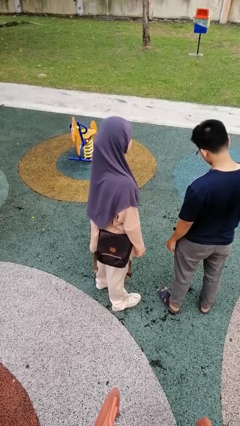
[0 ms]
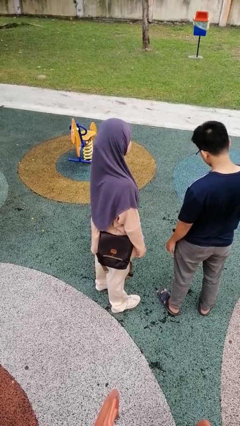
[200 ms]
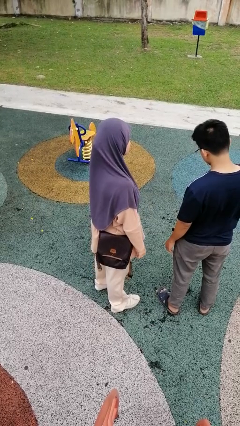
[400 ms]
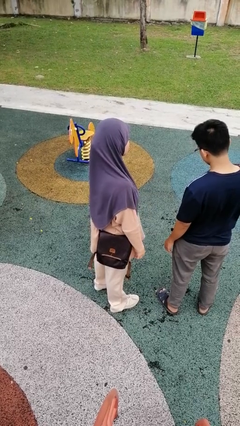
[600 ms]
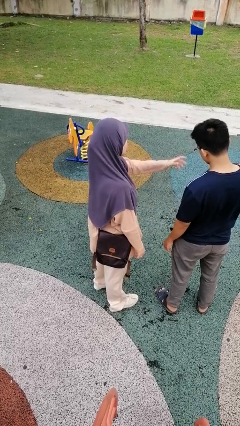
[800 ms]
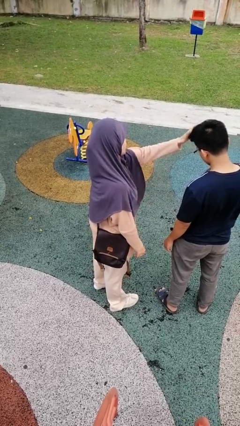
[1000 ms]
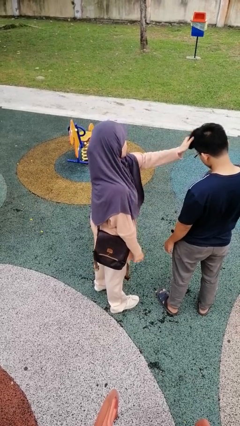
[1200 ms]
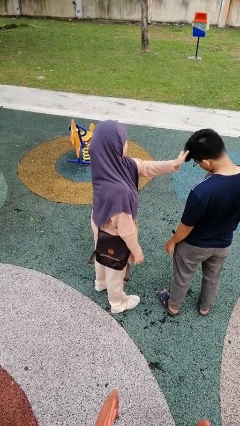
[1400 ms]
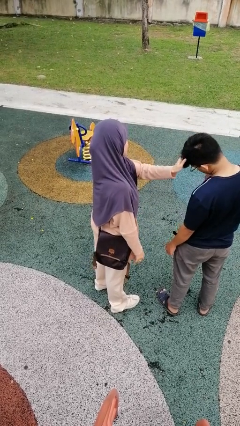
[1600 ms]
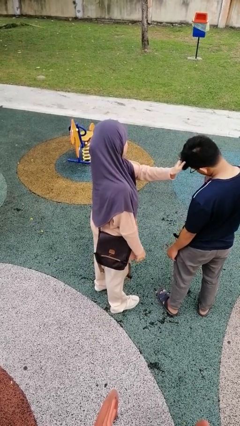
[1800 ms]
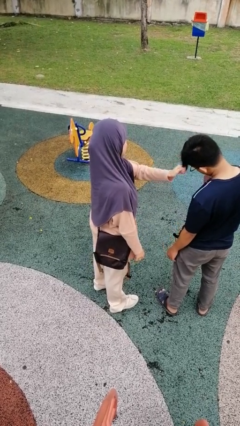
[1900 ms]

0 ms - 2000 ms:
person grabs person by hair

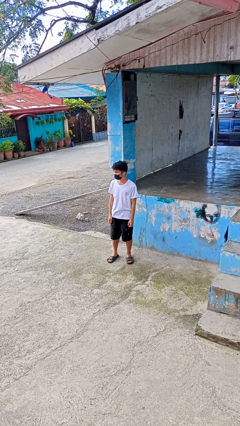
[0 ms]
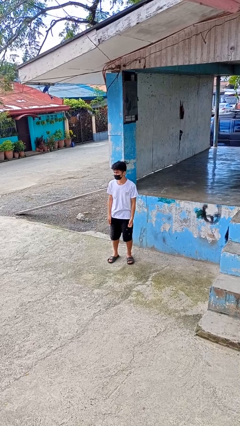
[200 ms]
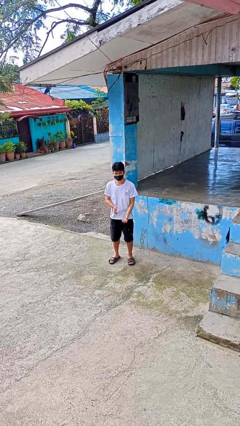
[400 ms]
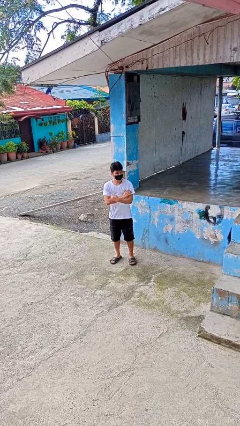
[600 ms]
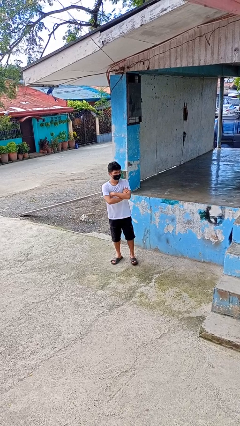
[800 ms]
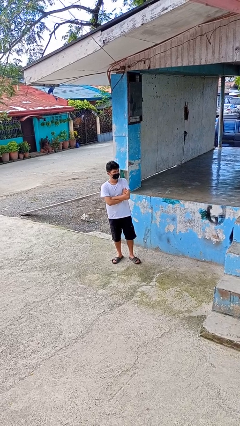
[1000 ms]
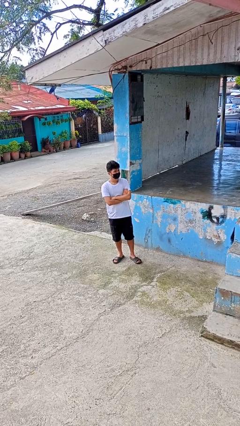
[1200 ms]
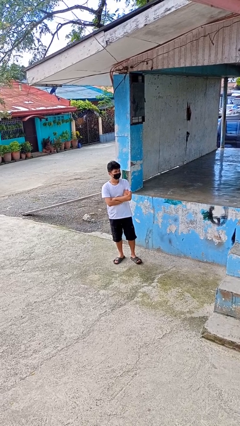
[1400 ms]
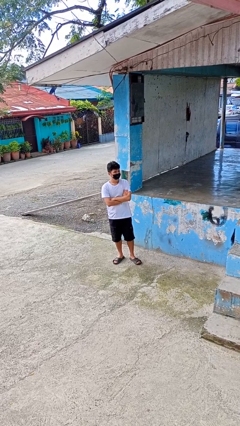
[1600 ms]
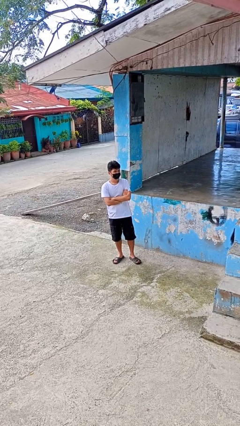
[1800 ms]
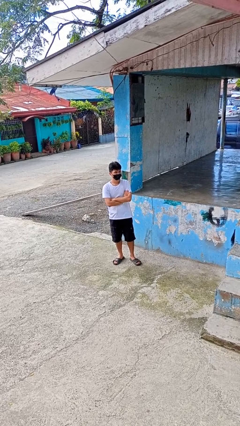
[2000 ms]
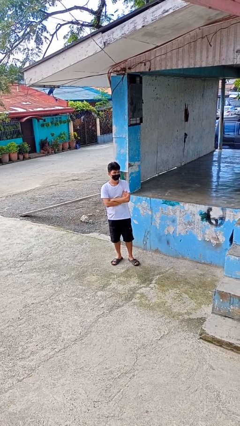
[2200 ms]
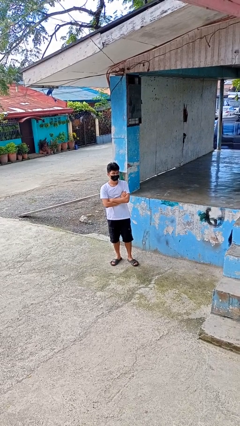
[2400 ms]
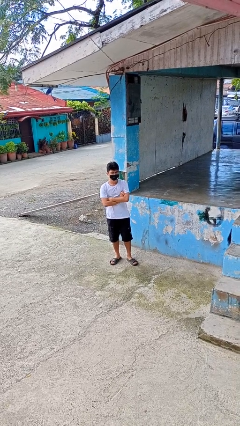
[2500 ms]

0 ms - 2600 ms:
person crosses arms

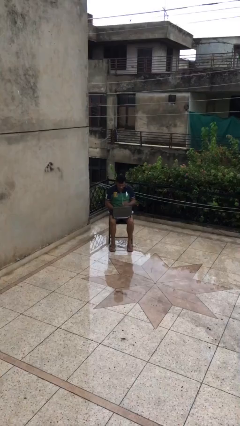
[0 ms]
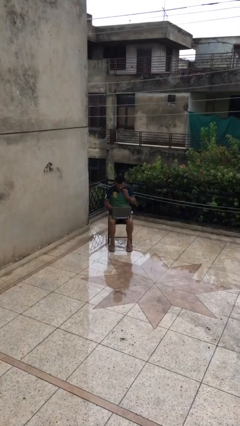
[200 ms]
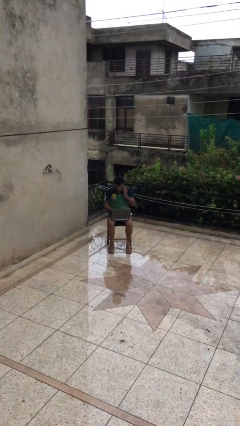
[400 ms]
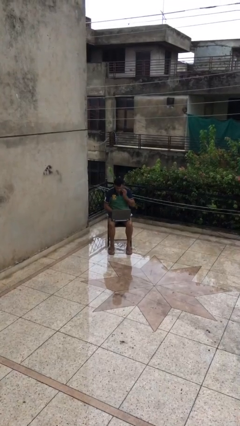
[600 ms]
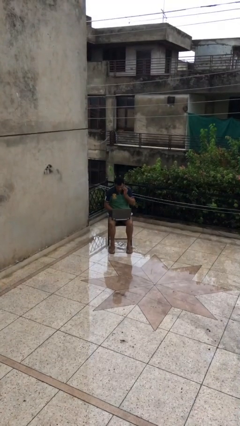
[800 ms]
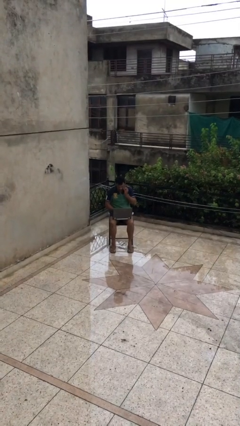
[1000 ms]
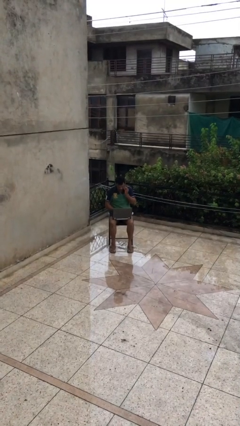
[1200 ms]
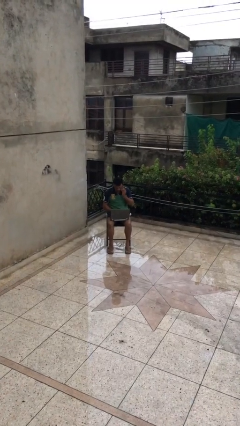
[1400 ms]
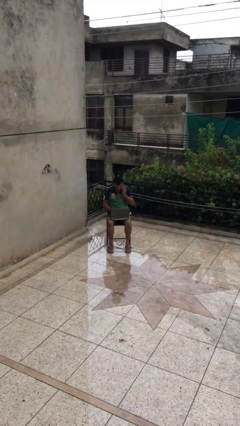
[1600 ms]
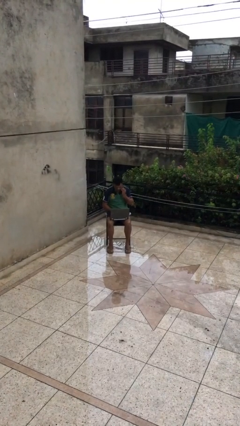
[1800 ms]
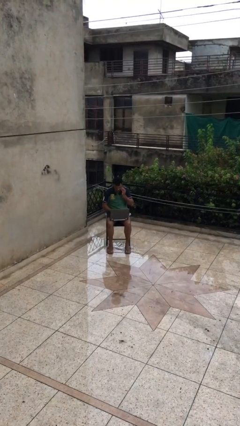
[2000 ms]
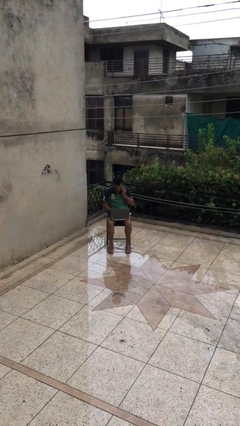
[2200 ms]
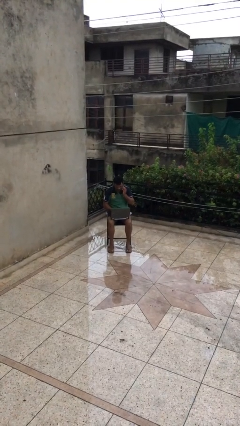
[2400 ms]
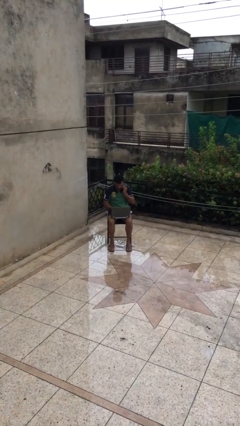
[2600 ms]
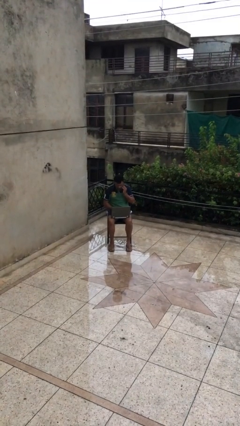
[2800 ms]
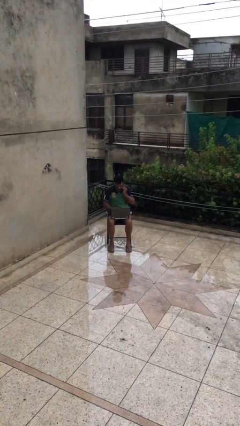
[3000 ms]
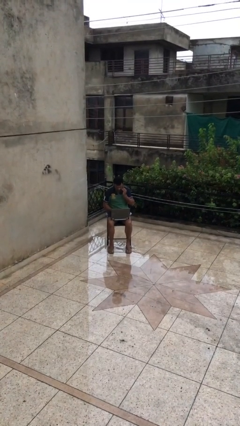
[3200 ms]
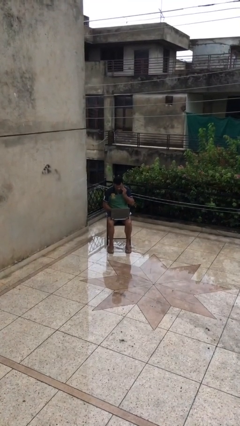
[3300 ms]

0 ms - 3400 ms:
person interacts with laptop

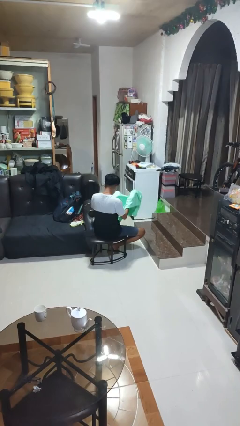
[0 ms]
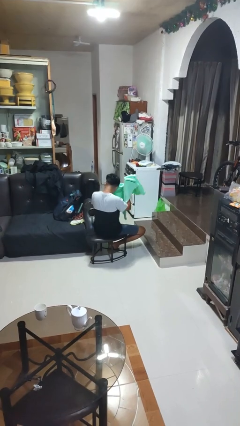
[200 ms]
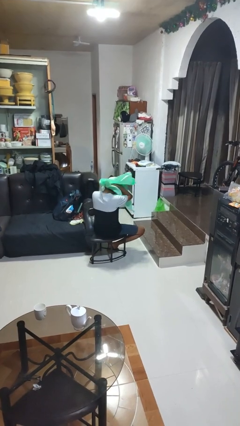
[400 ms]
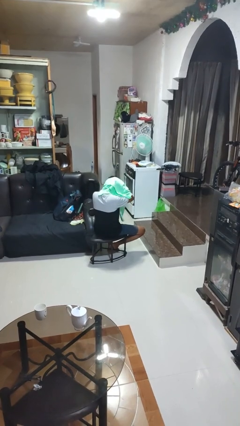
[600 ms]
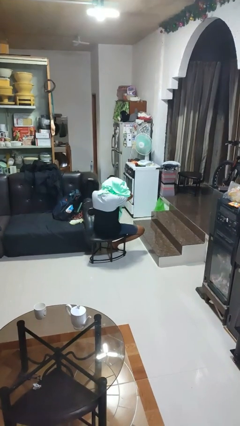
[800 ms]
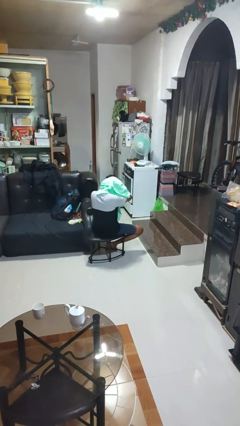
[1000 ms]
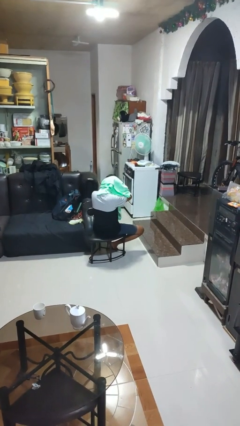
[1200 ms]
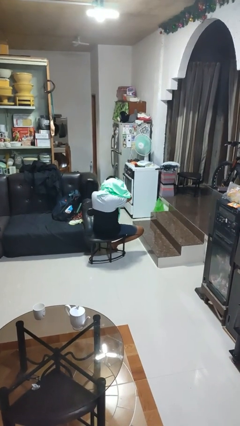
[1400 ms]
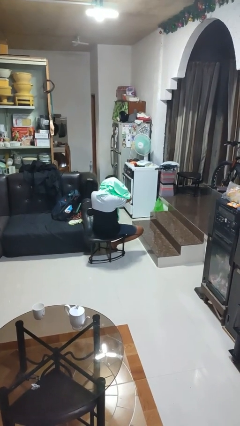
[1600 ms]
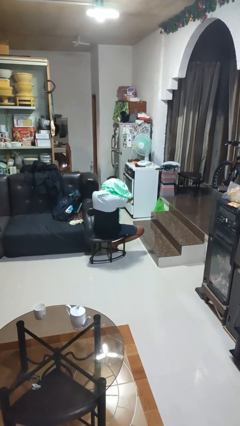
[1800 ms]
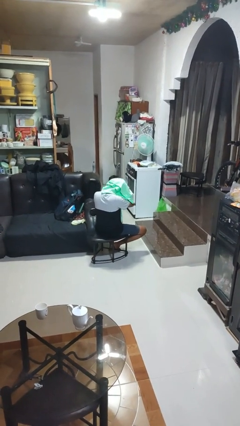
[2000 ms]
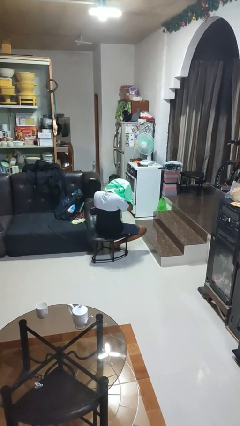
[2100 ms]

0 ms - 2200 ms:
person dries hair with towel

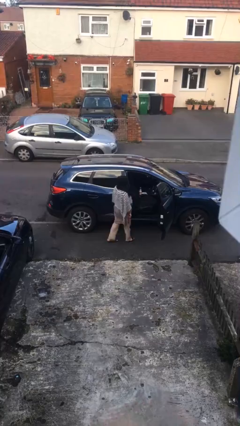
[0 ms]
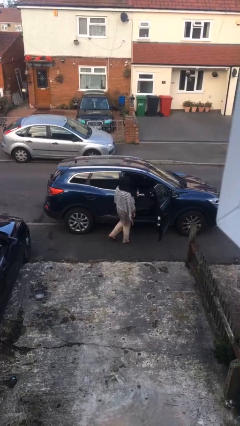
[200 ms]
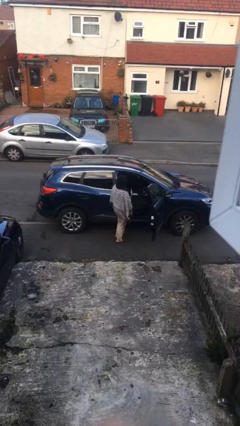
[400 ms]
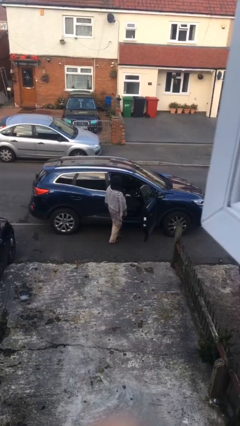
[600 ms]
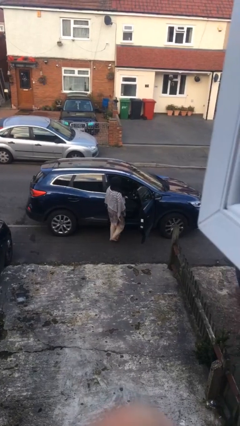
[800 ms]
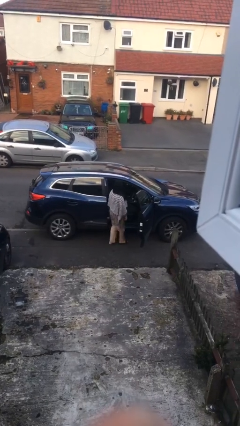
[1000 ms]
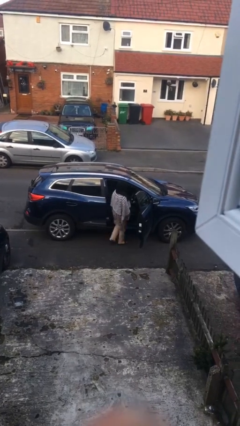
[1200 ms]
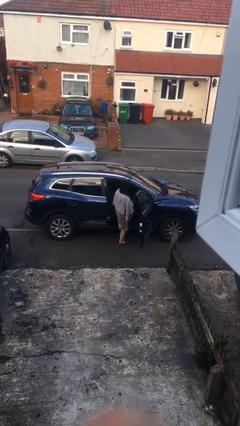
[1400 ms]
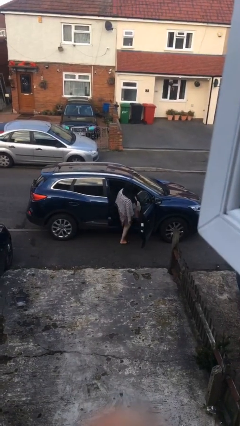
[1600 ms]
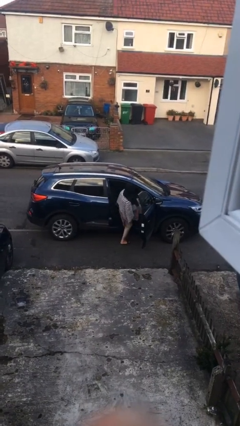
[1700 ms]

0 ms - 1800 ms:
person enters car

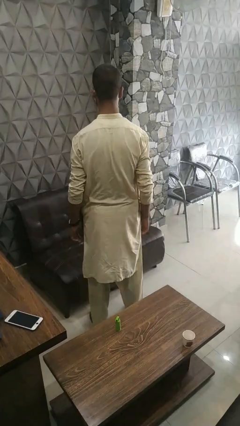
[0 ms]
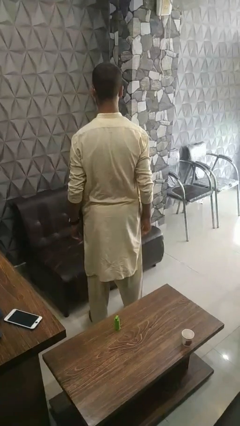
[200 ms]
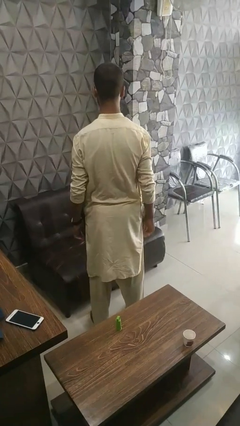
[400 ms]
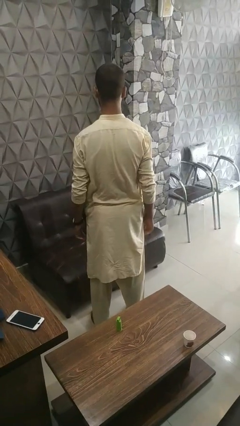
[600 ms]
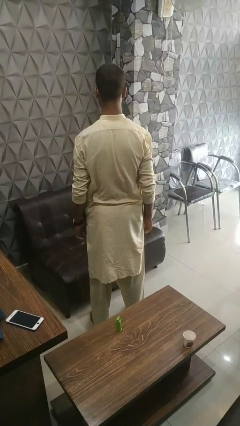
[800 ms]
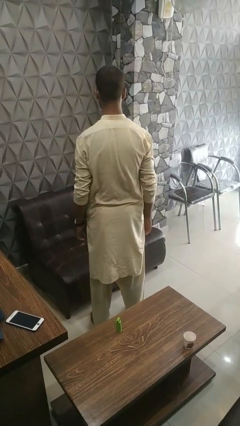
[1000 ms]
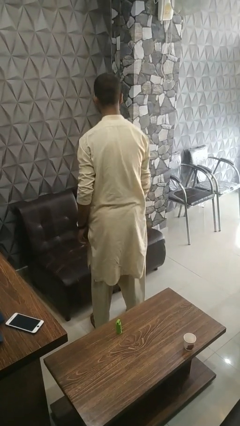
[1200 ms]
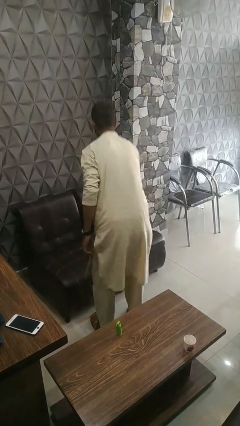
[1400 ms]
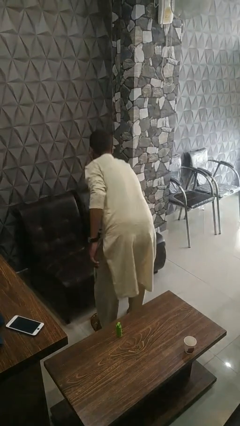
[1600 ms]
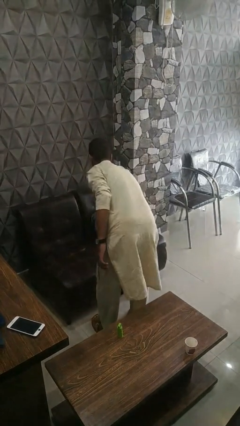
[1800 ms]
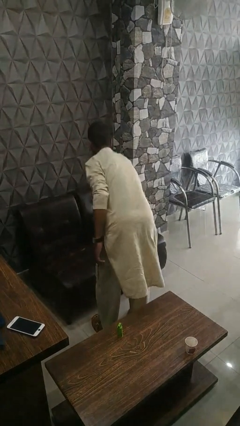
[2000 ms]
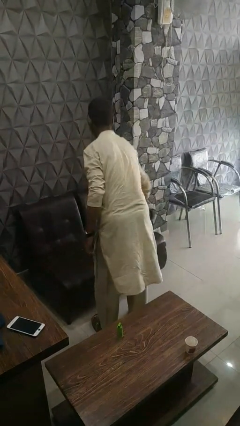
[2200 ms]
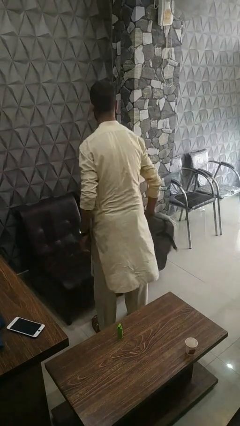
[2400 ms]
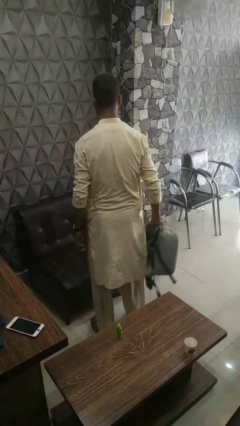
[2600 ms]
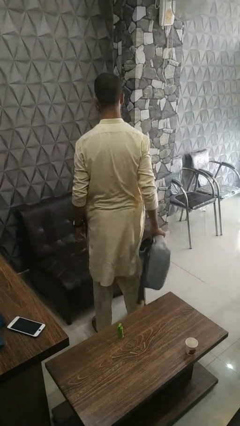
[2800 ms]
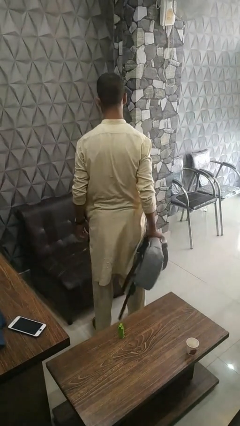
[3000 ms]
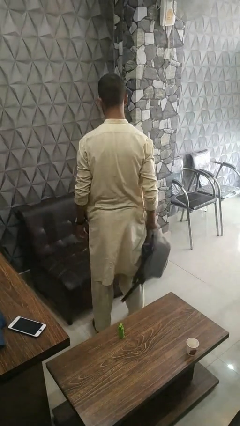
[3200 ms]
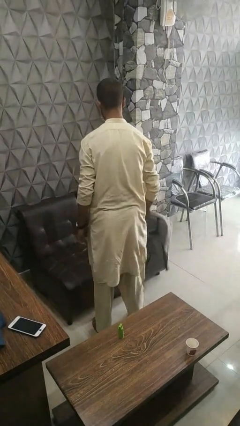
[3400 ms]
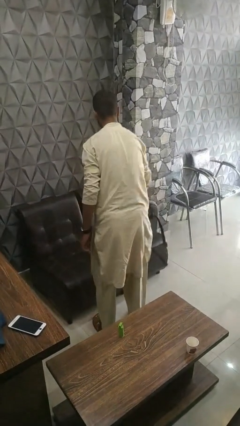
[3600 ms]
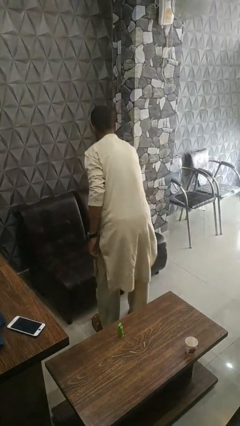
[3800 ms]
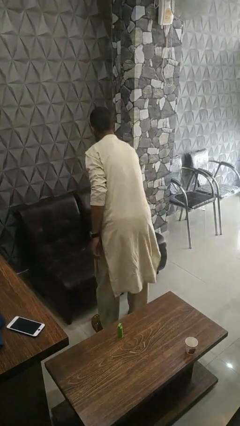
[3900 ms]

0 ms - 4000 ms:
person searches in couch

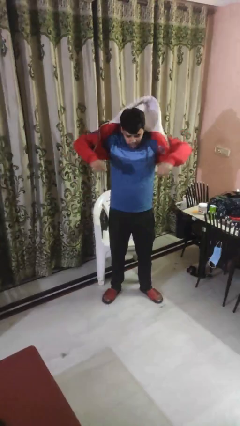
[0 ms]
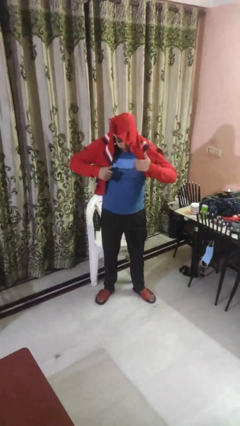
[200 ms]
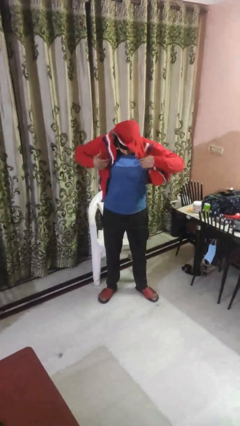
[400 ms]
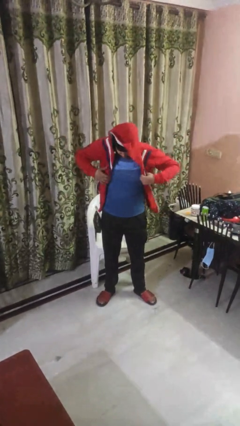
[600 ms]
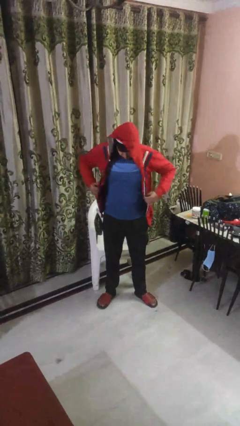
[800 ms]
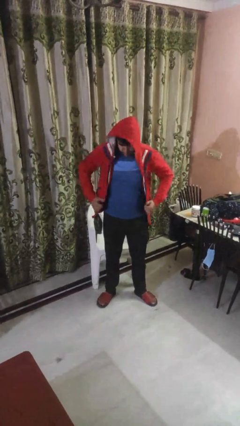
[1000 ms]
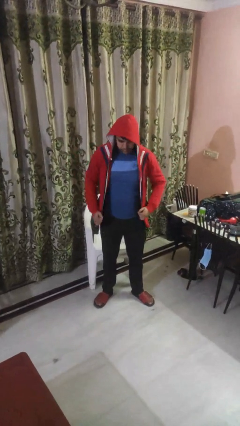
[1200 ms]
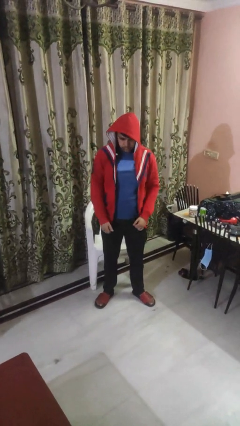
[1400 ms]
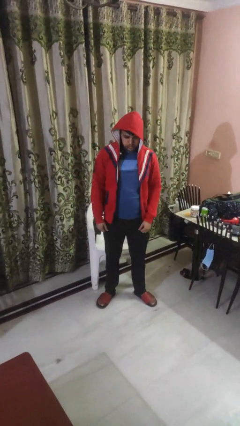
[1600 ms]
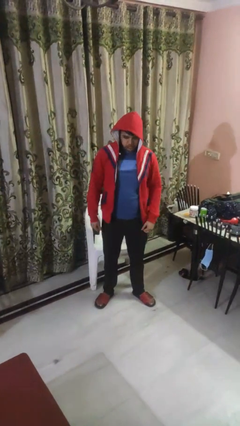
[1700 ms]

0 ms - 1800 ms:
person puts on hoodie
